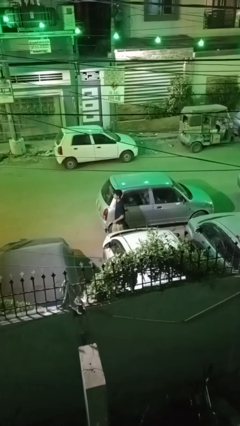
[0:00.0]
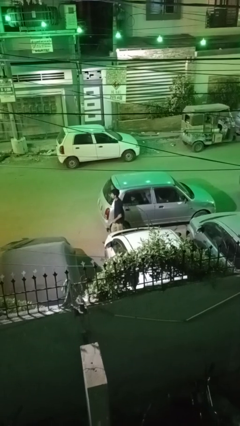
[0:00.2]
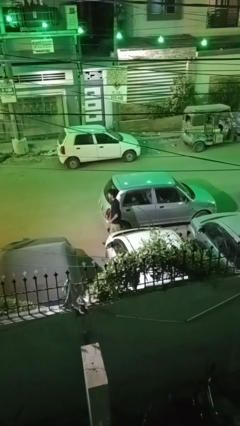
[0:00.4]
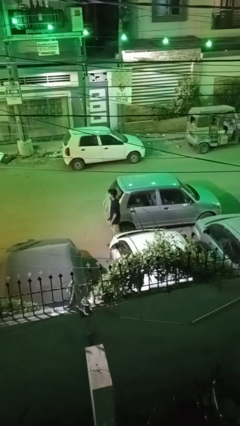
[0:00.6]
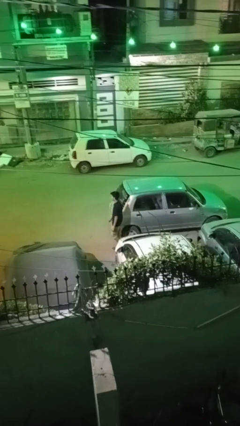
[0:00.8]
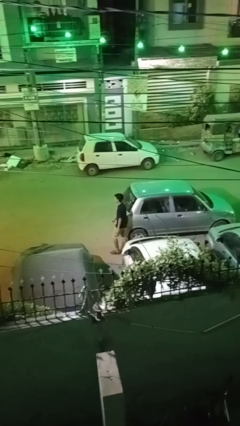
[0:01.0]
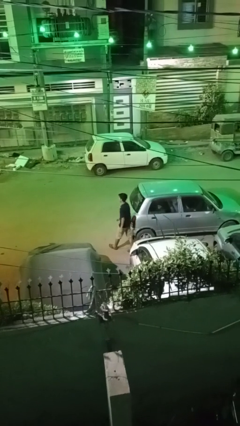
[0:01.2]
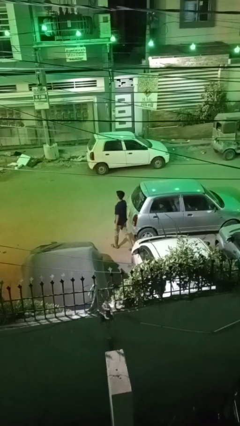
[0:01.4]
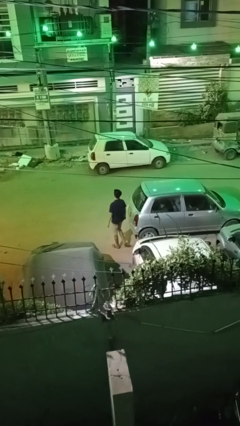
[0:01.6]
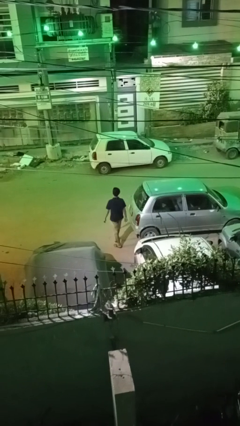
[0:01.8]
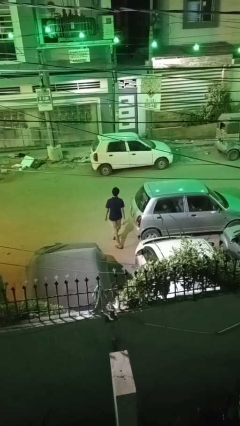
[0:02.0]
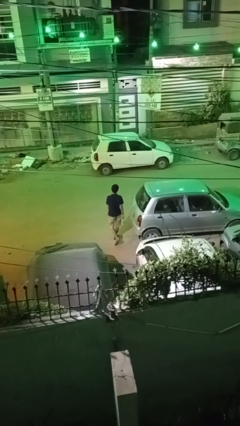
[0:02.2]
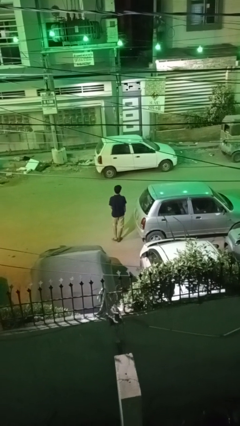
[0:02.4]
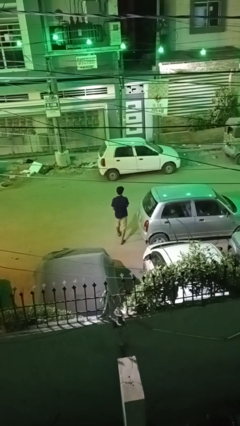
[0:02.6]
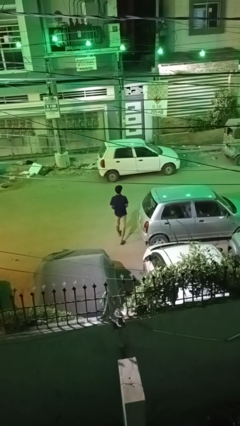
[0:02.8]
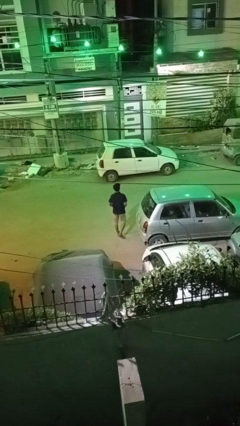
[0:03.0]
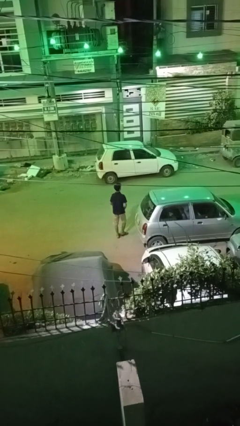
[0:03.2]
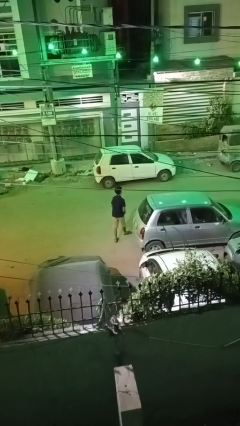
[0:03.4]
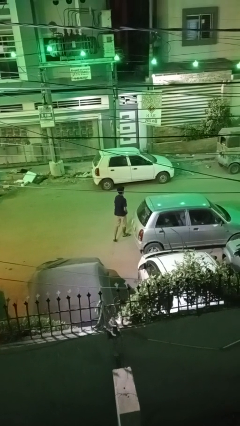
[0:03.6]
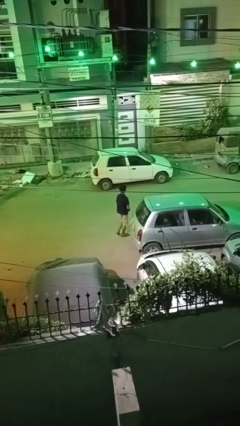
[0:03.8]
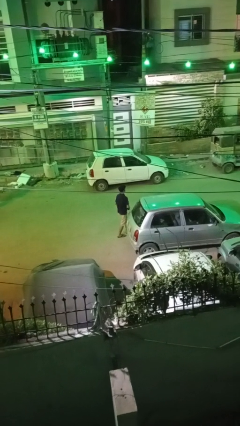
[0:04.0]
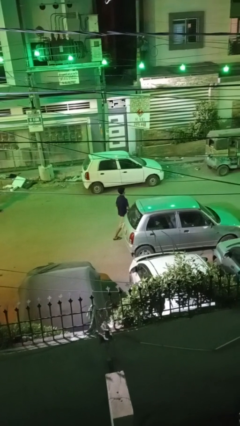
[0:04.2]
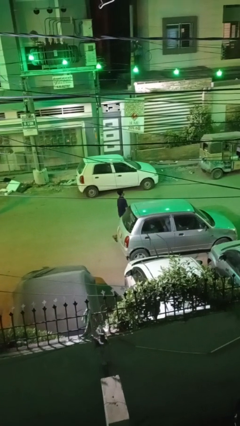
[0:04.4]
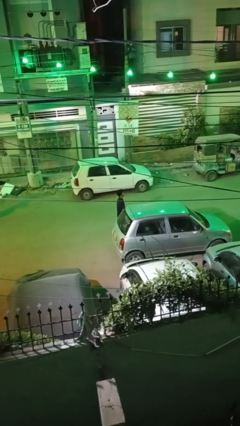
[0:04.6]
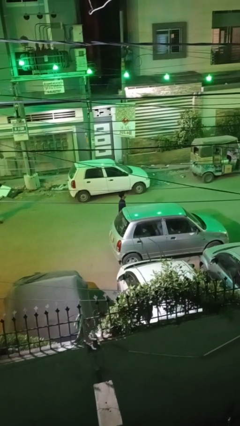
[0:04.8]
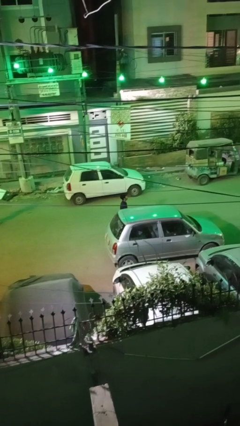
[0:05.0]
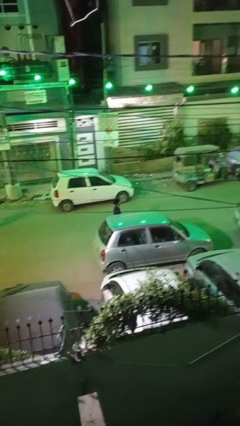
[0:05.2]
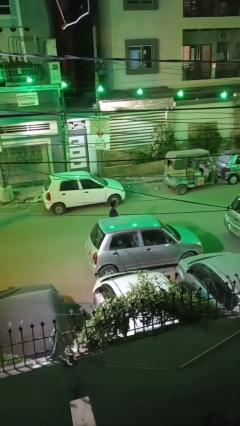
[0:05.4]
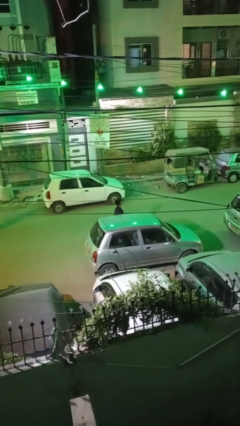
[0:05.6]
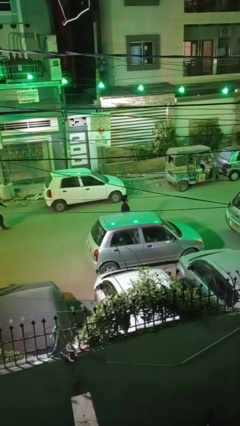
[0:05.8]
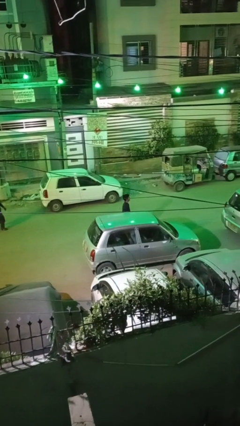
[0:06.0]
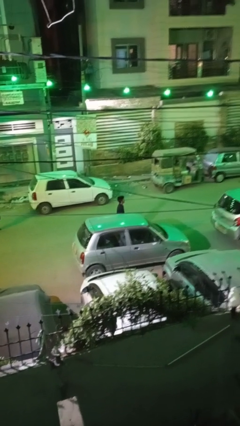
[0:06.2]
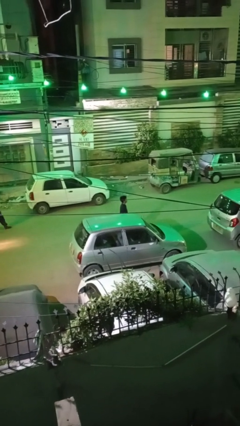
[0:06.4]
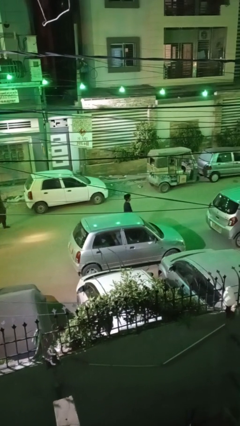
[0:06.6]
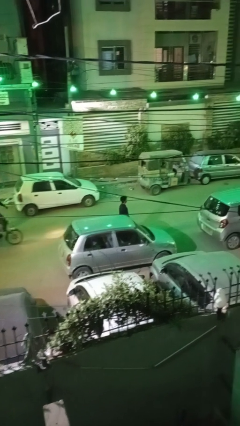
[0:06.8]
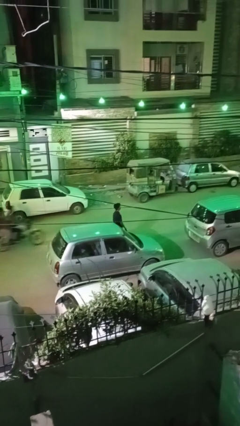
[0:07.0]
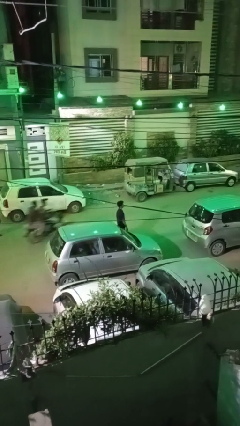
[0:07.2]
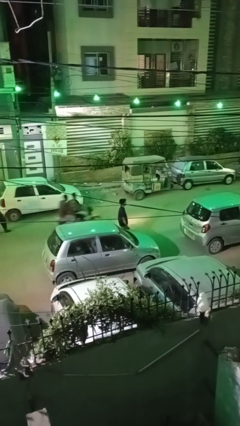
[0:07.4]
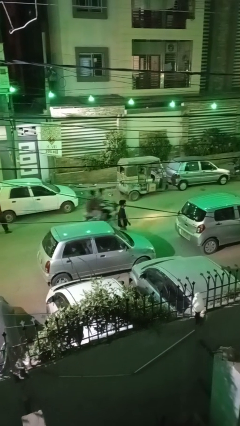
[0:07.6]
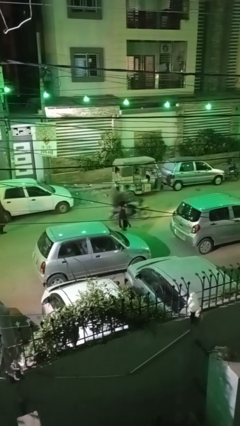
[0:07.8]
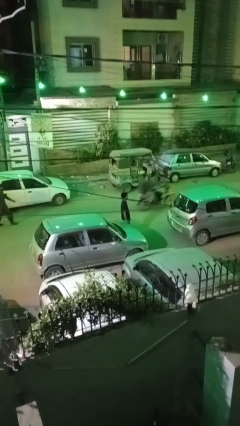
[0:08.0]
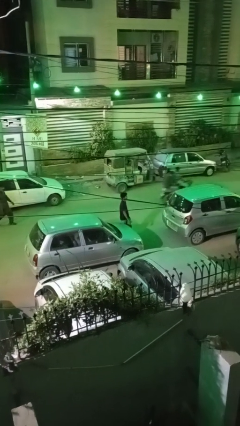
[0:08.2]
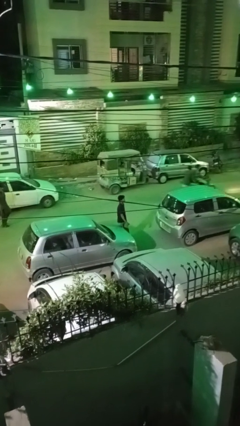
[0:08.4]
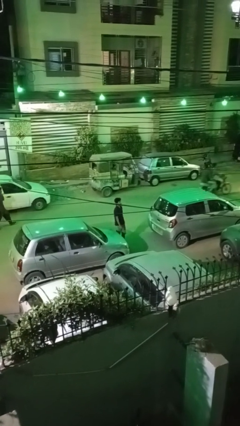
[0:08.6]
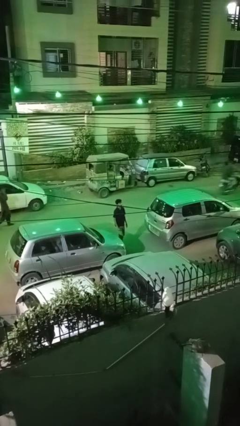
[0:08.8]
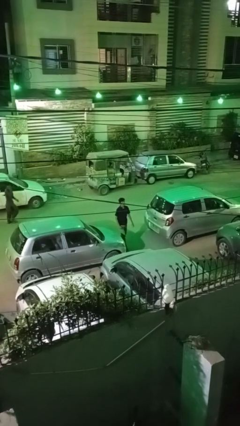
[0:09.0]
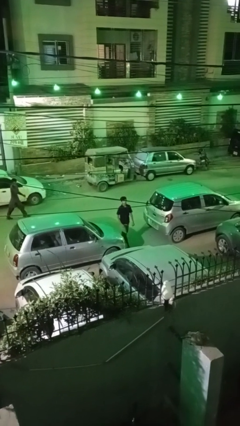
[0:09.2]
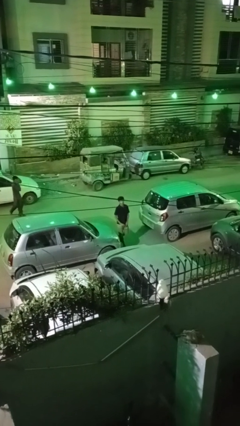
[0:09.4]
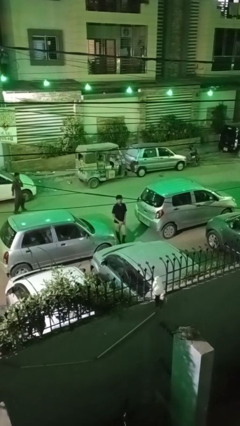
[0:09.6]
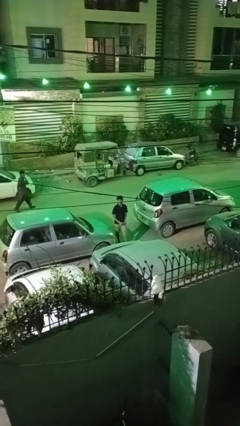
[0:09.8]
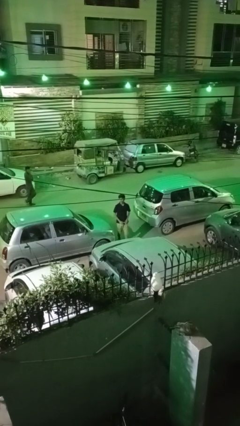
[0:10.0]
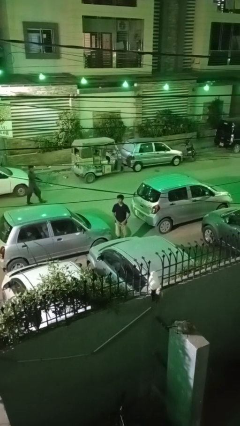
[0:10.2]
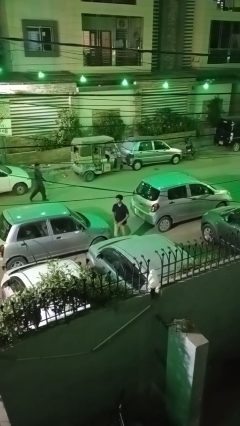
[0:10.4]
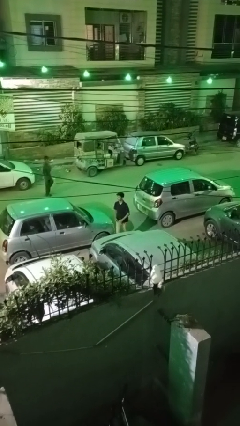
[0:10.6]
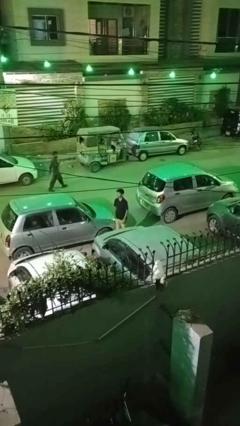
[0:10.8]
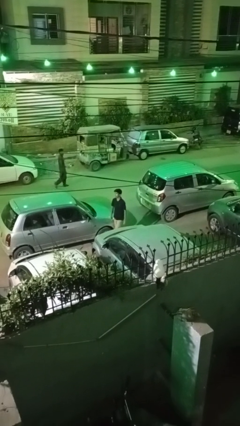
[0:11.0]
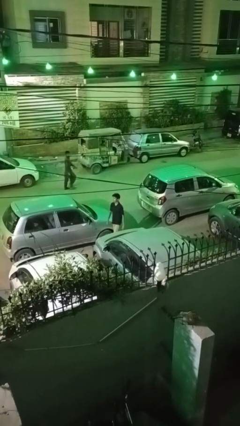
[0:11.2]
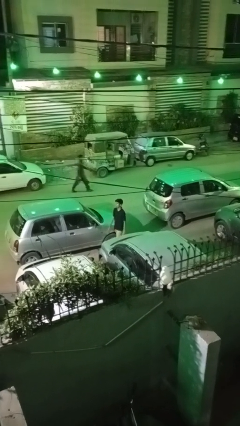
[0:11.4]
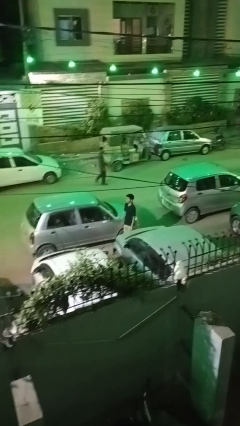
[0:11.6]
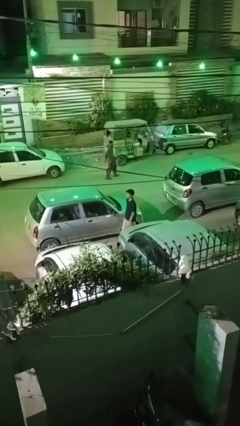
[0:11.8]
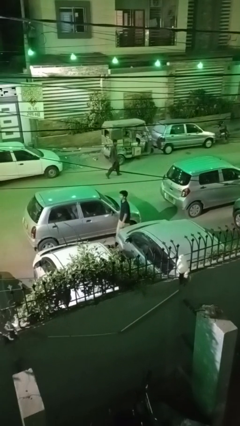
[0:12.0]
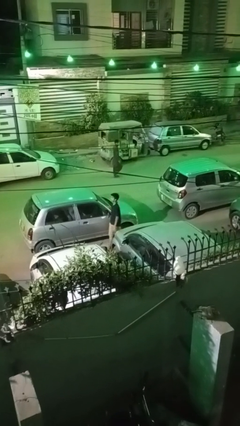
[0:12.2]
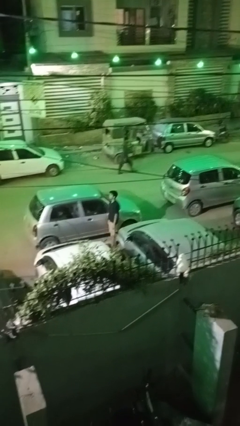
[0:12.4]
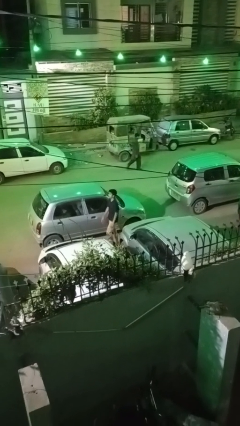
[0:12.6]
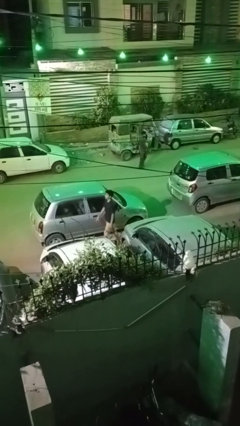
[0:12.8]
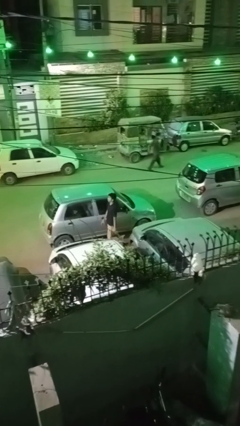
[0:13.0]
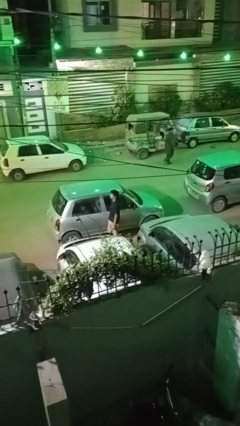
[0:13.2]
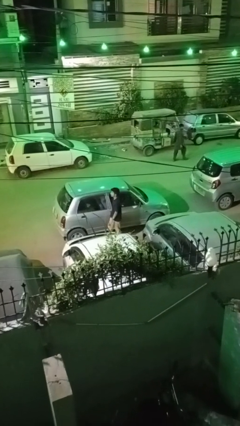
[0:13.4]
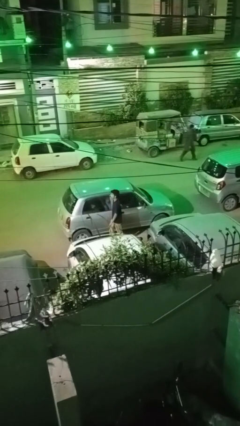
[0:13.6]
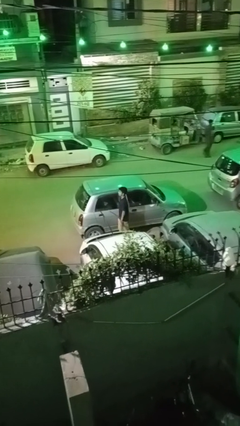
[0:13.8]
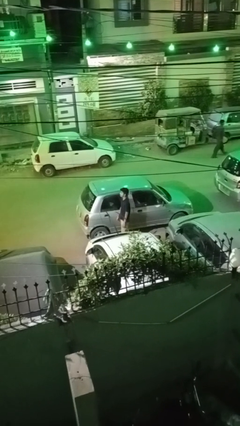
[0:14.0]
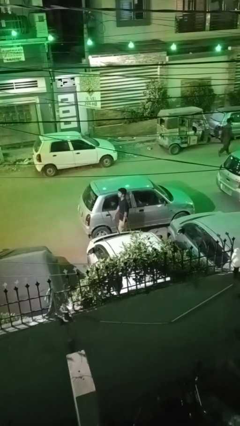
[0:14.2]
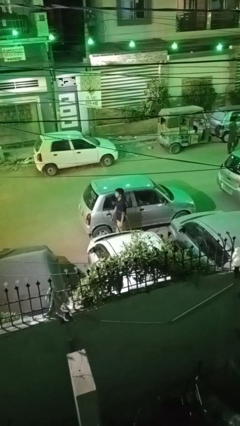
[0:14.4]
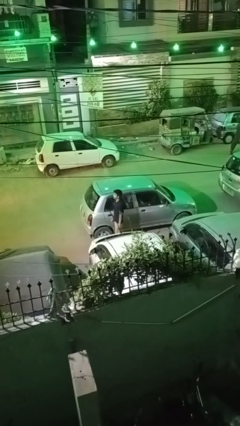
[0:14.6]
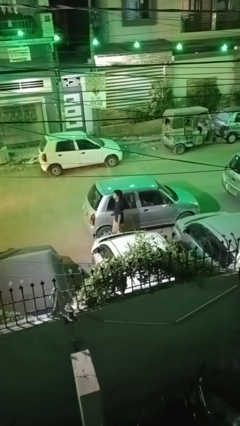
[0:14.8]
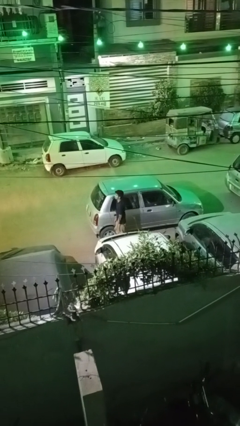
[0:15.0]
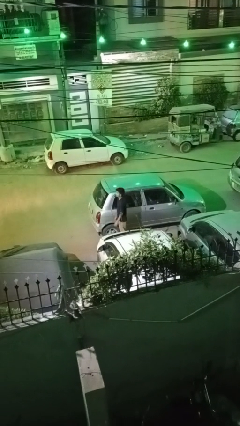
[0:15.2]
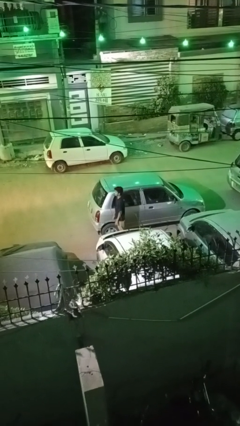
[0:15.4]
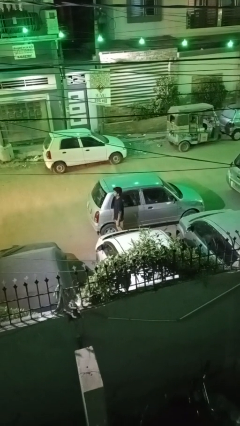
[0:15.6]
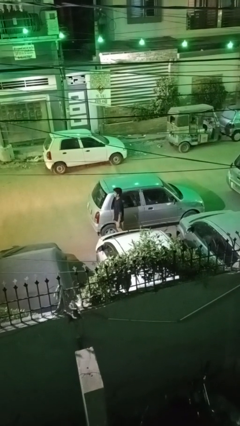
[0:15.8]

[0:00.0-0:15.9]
person walks around car

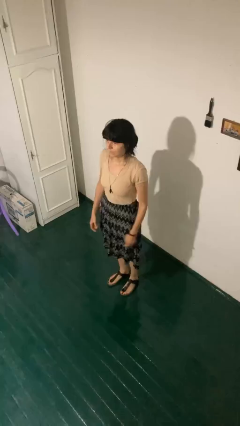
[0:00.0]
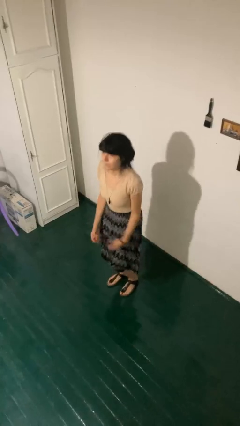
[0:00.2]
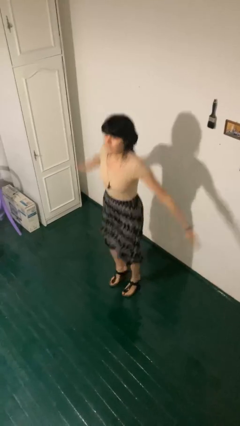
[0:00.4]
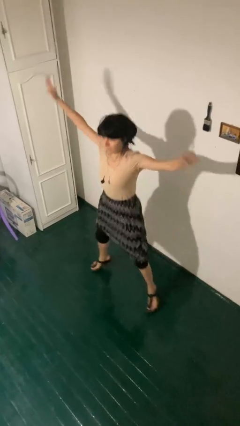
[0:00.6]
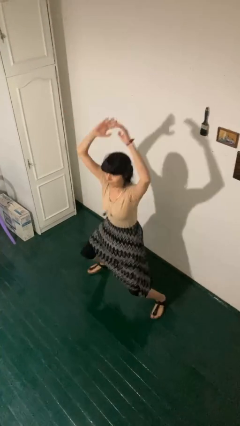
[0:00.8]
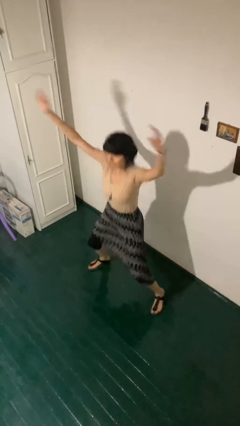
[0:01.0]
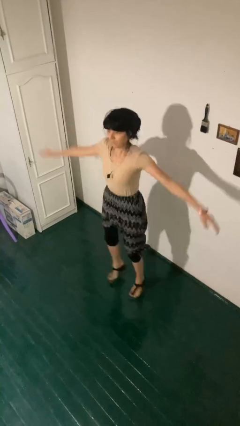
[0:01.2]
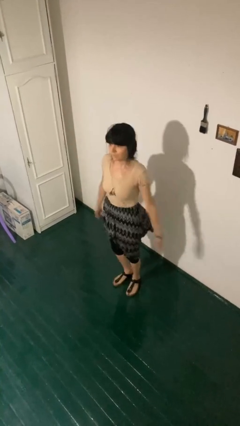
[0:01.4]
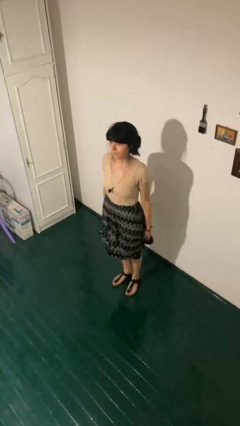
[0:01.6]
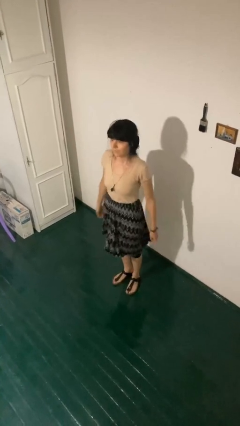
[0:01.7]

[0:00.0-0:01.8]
person exercises with jumping jacks

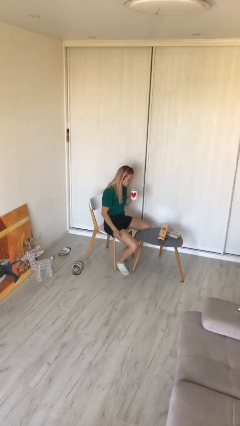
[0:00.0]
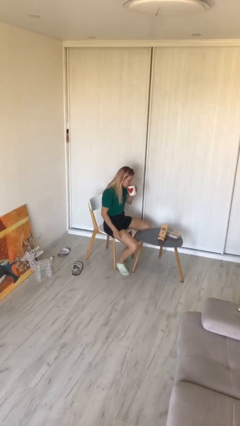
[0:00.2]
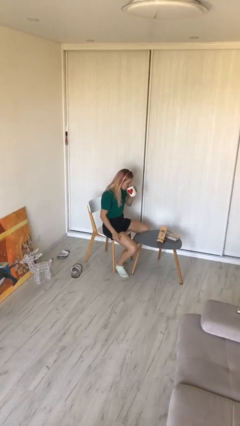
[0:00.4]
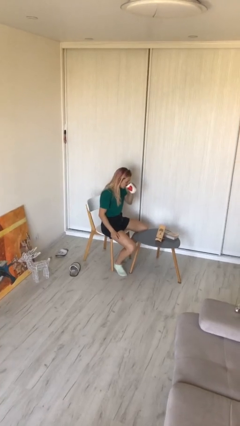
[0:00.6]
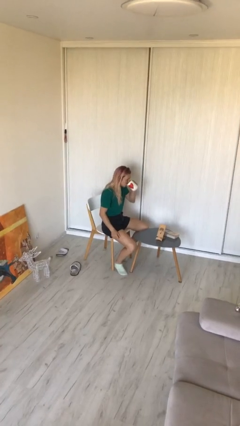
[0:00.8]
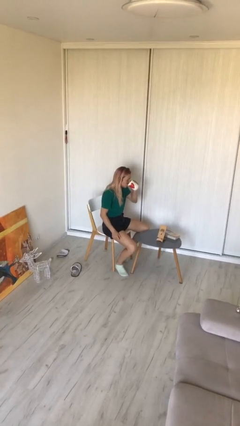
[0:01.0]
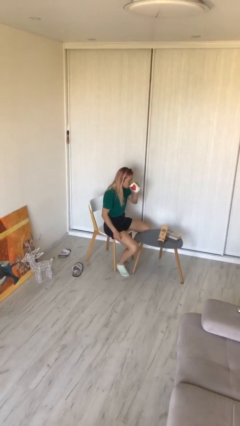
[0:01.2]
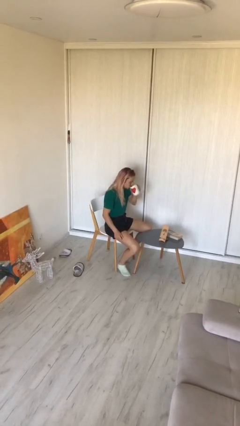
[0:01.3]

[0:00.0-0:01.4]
person drinks from mug
